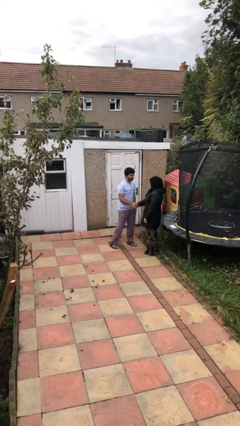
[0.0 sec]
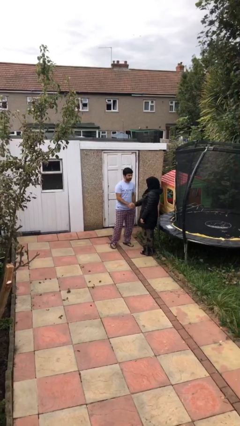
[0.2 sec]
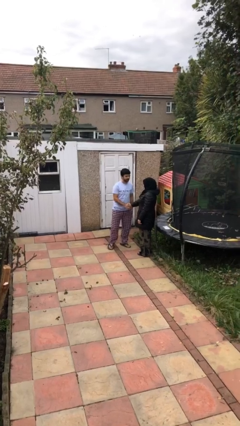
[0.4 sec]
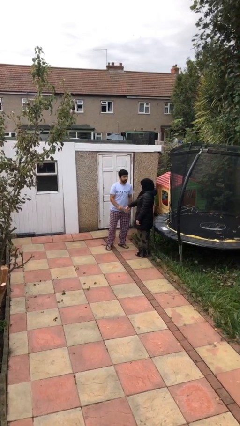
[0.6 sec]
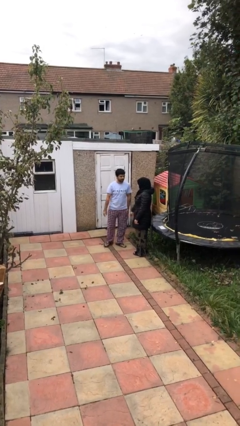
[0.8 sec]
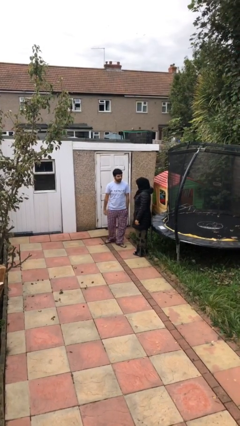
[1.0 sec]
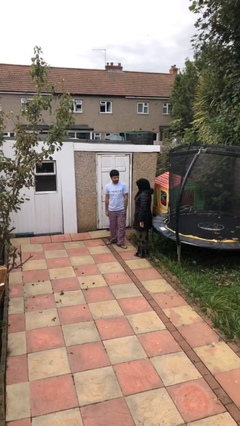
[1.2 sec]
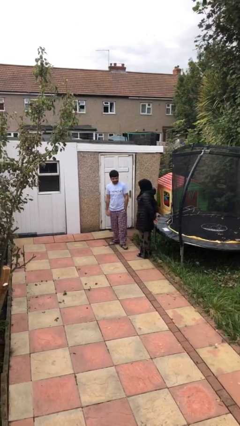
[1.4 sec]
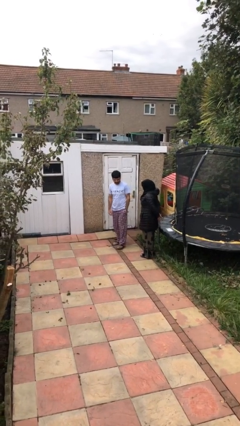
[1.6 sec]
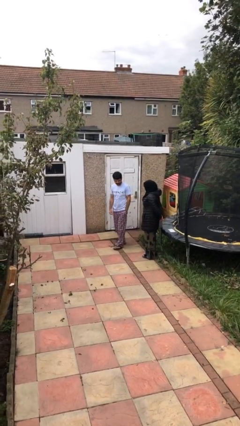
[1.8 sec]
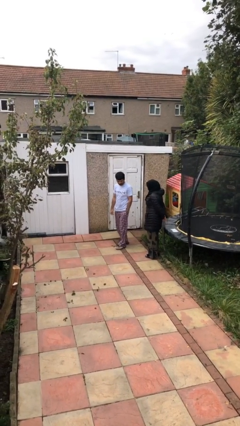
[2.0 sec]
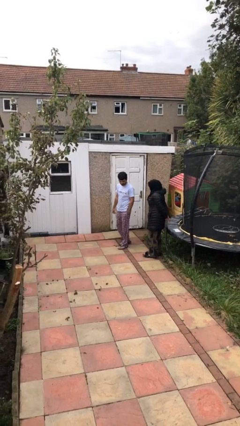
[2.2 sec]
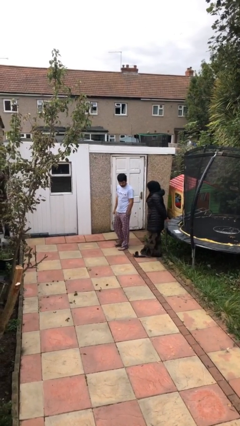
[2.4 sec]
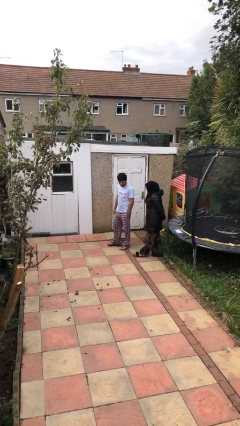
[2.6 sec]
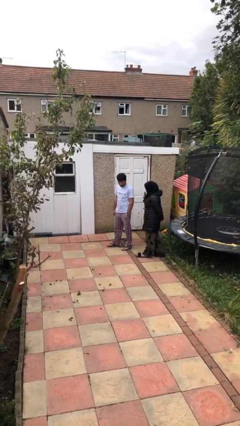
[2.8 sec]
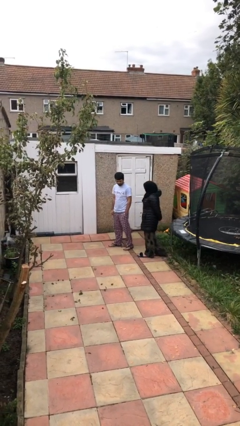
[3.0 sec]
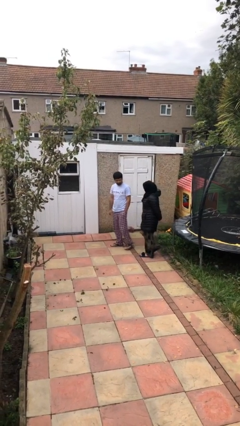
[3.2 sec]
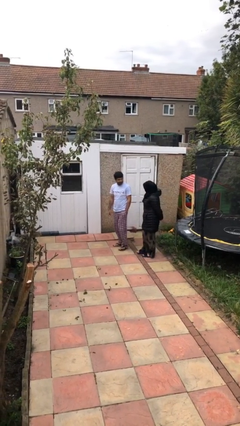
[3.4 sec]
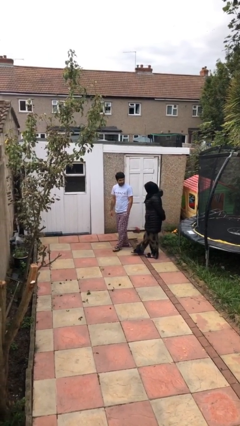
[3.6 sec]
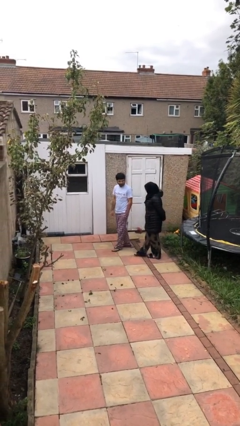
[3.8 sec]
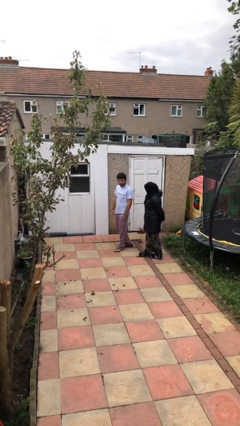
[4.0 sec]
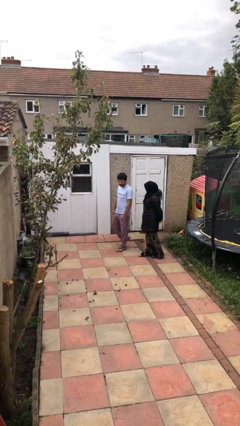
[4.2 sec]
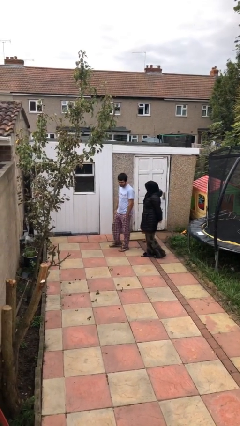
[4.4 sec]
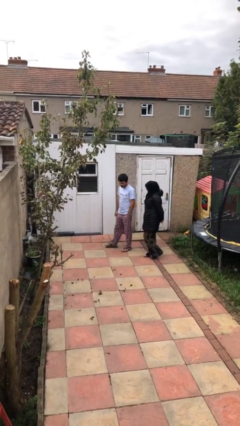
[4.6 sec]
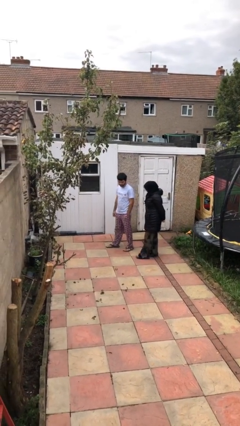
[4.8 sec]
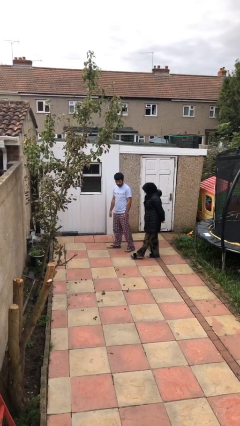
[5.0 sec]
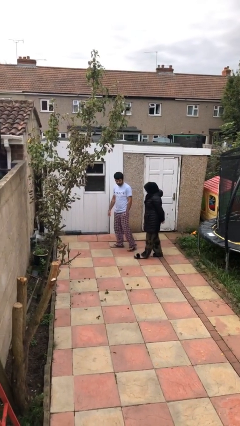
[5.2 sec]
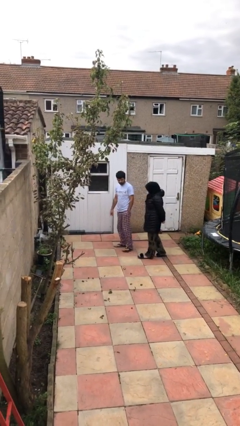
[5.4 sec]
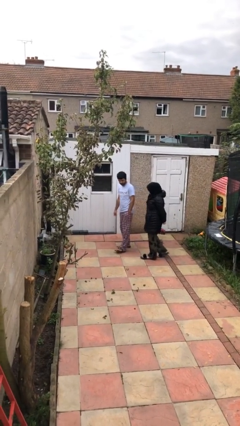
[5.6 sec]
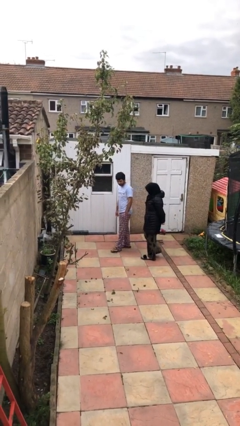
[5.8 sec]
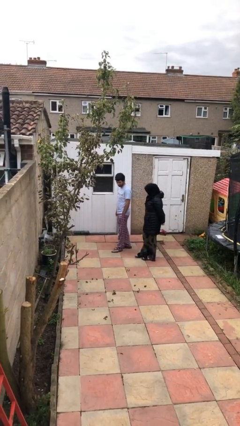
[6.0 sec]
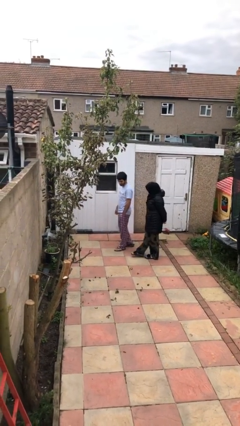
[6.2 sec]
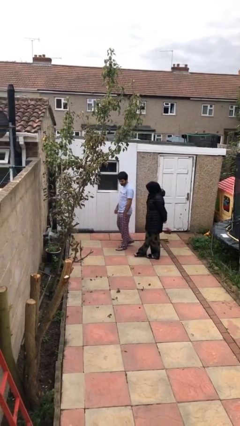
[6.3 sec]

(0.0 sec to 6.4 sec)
person talks to person

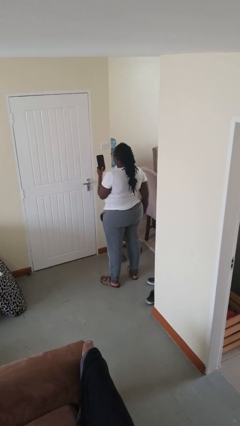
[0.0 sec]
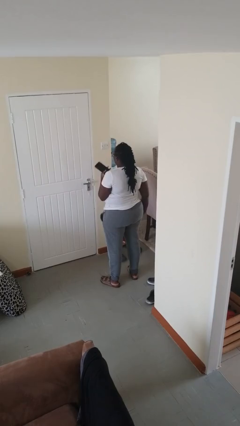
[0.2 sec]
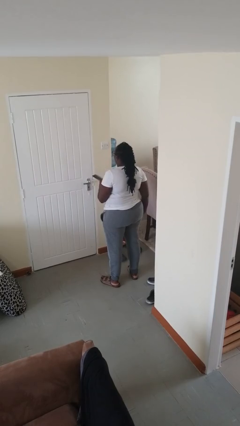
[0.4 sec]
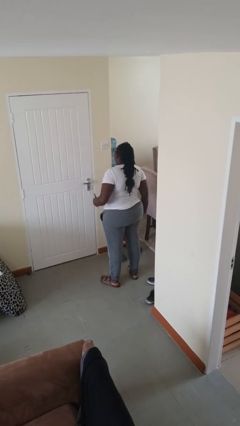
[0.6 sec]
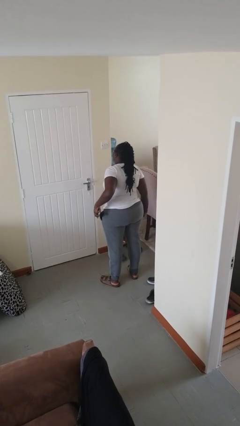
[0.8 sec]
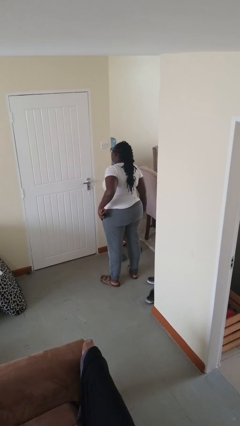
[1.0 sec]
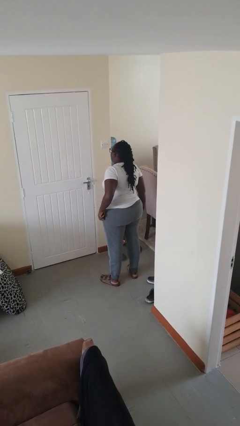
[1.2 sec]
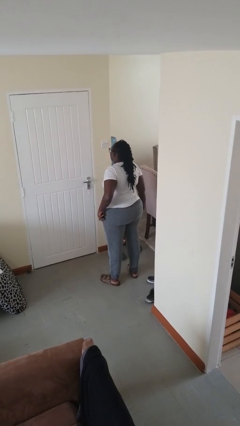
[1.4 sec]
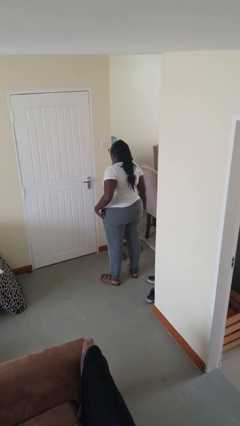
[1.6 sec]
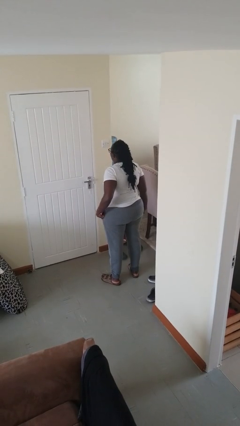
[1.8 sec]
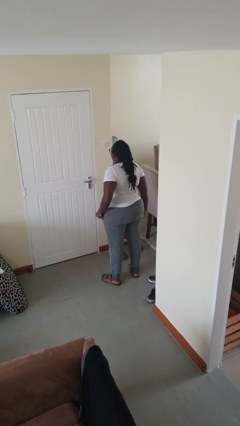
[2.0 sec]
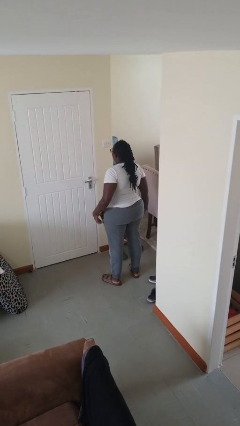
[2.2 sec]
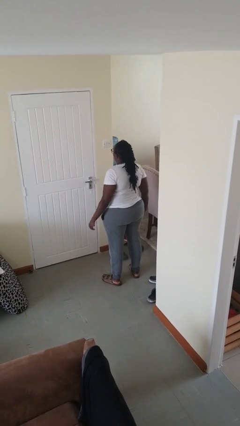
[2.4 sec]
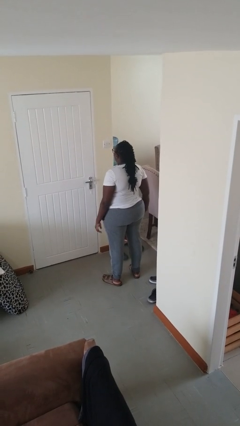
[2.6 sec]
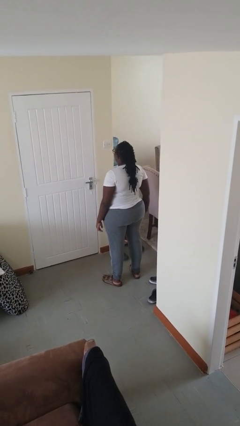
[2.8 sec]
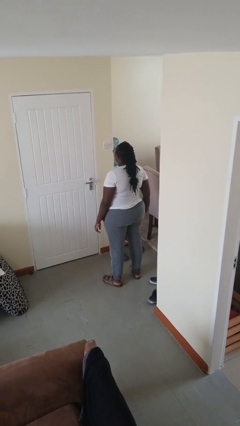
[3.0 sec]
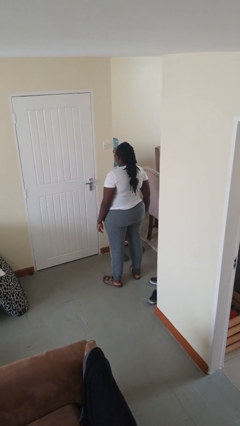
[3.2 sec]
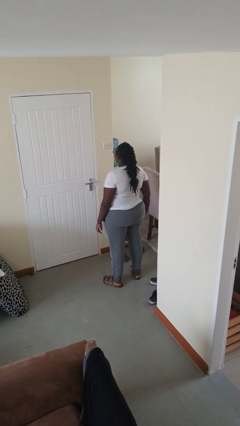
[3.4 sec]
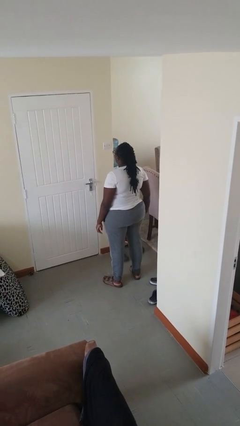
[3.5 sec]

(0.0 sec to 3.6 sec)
person puts phone into pocket

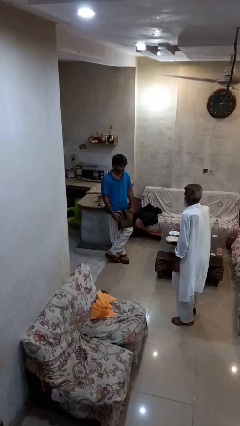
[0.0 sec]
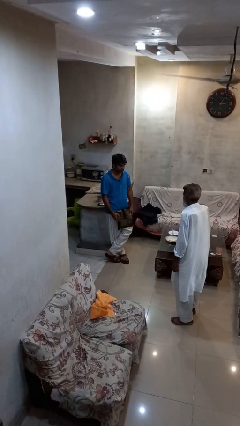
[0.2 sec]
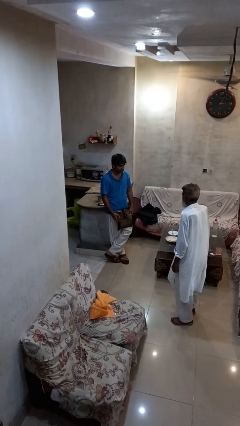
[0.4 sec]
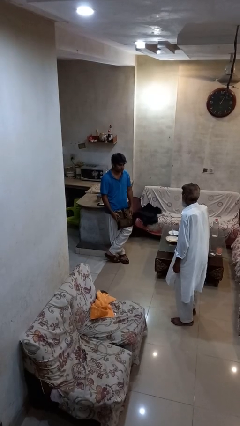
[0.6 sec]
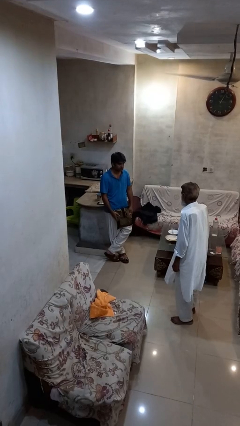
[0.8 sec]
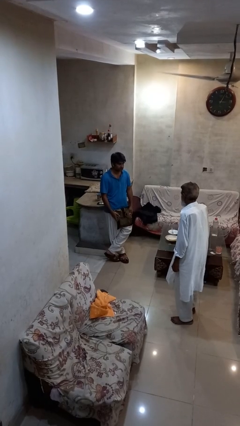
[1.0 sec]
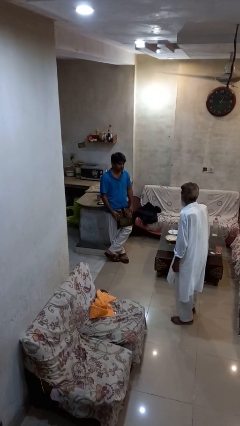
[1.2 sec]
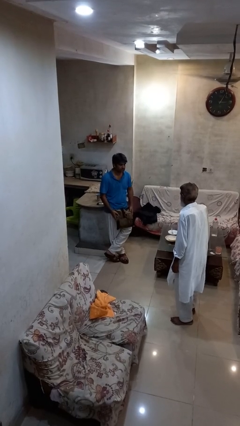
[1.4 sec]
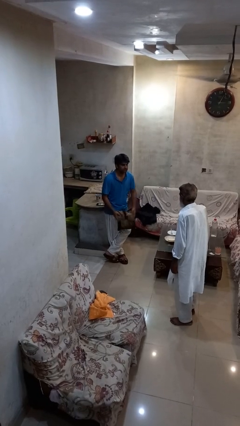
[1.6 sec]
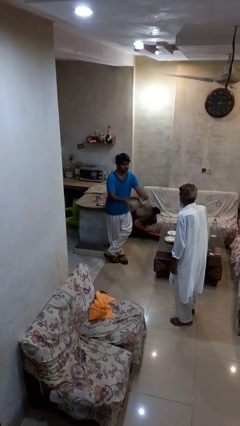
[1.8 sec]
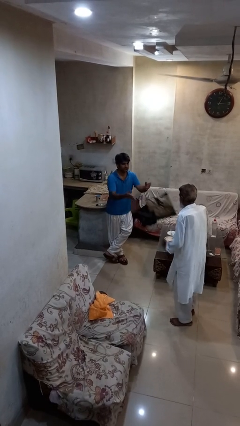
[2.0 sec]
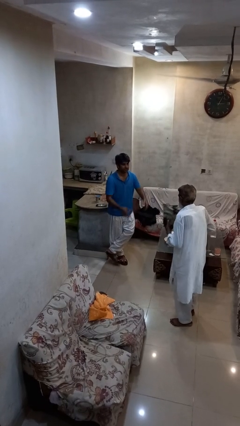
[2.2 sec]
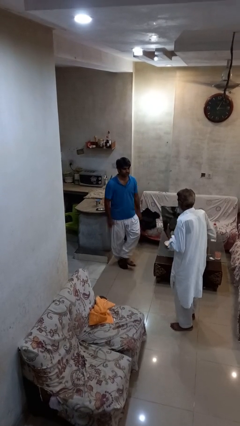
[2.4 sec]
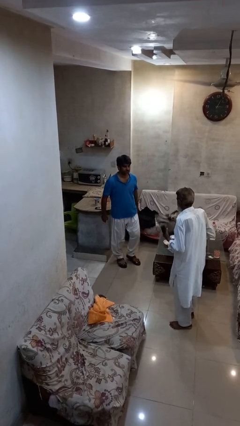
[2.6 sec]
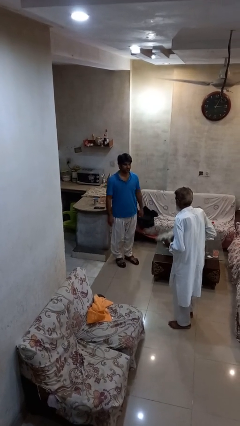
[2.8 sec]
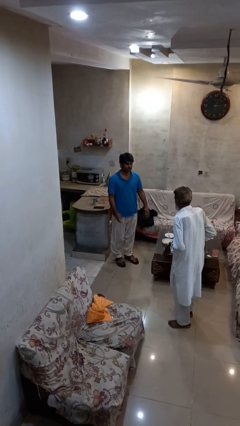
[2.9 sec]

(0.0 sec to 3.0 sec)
person throws object to person

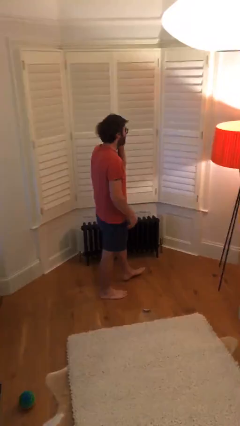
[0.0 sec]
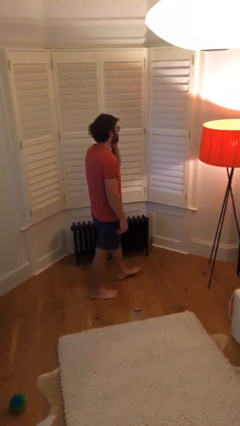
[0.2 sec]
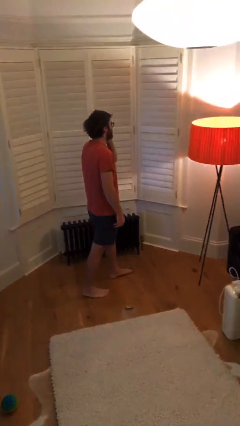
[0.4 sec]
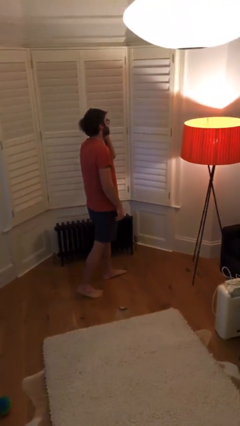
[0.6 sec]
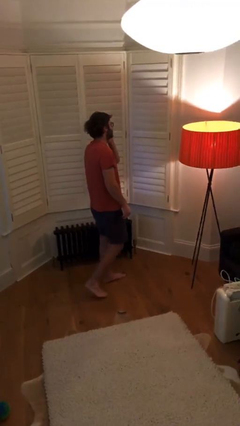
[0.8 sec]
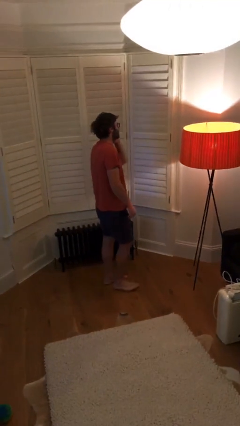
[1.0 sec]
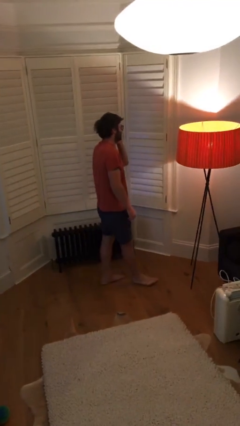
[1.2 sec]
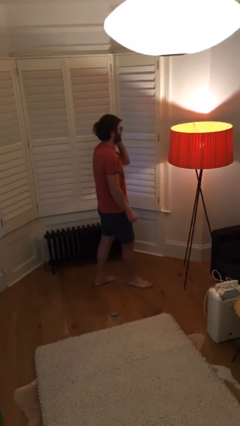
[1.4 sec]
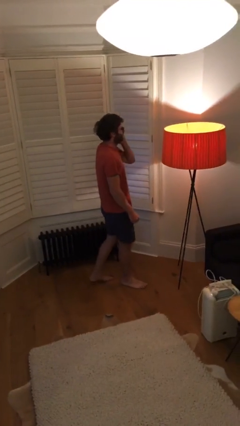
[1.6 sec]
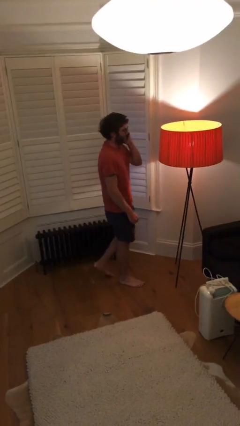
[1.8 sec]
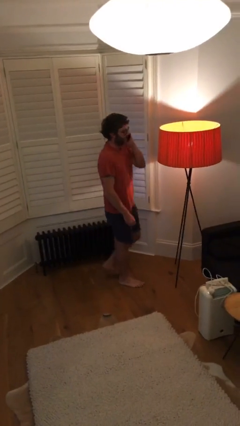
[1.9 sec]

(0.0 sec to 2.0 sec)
person talks on phone

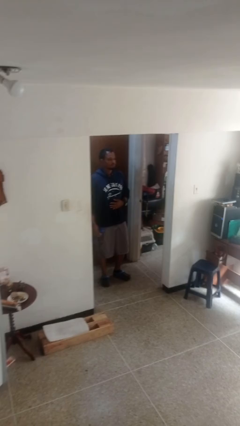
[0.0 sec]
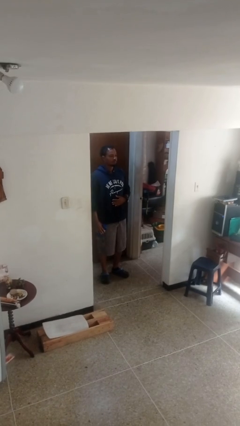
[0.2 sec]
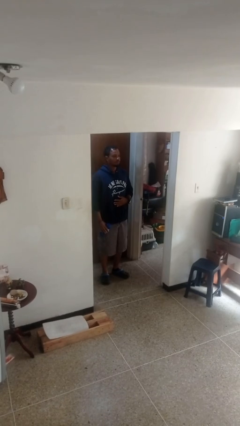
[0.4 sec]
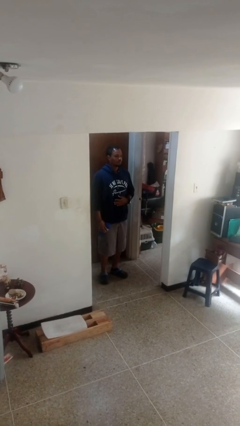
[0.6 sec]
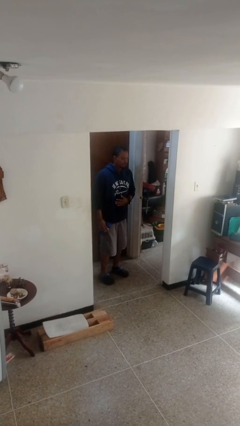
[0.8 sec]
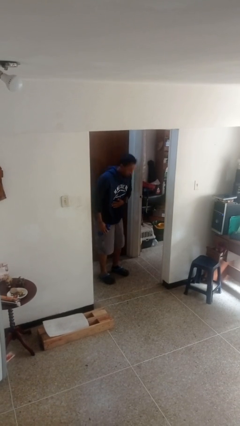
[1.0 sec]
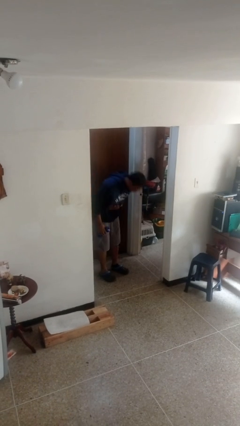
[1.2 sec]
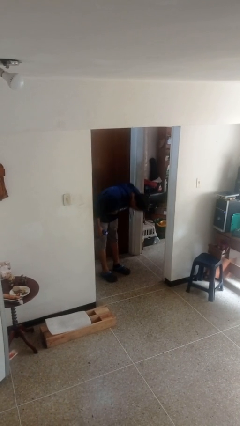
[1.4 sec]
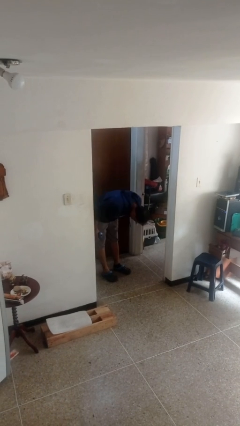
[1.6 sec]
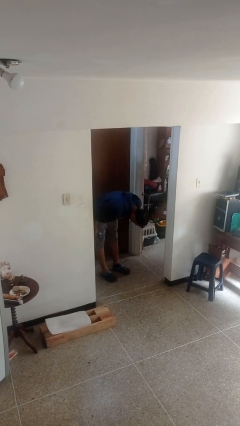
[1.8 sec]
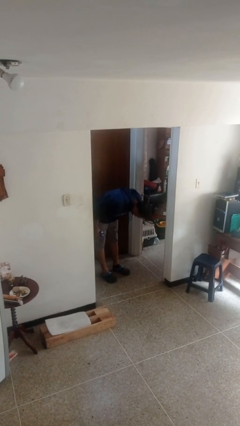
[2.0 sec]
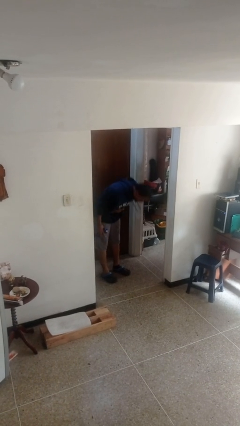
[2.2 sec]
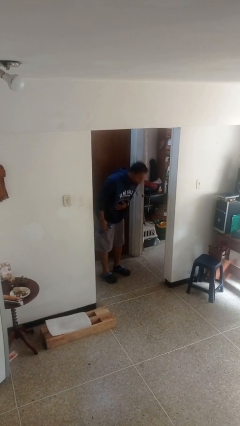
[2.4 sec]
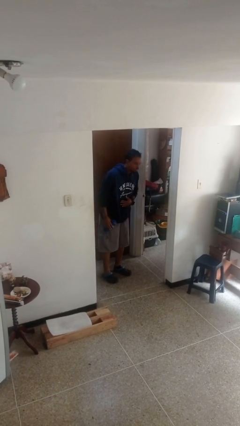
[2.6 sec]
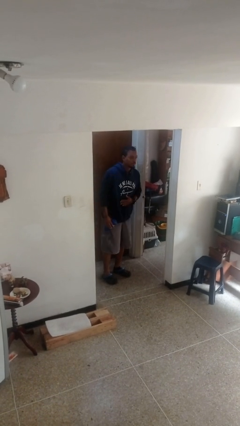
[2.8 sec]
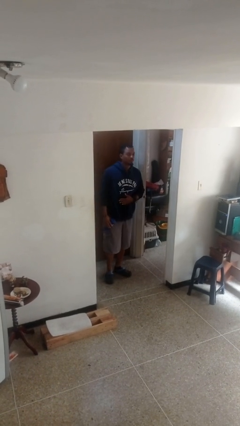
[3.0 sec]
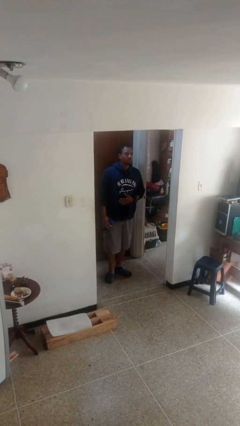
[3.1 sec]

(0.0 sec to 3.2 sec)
person bows
